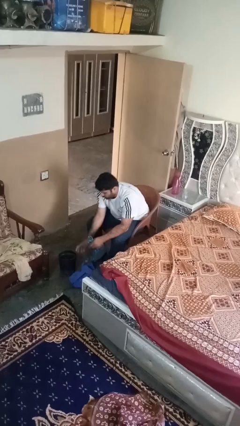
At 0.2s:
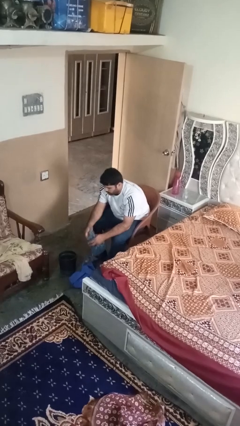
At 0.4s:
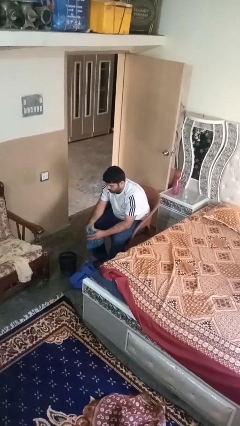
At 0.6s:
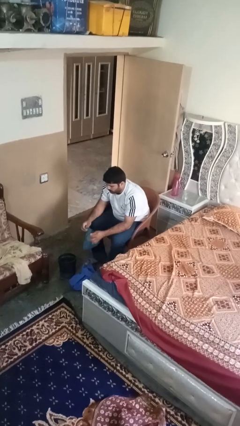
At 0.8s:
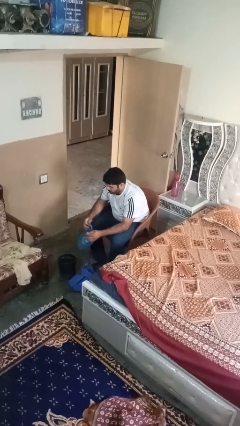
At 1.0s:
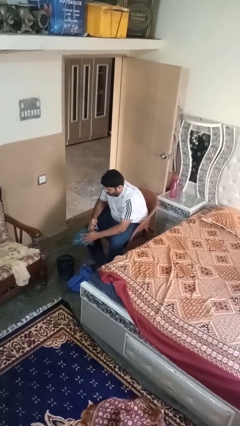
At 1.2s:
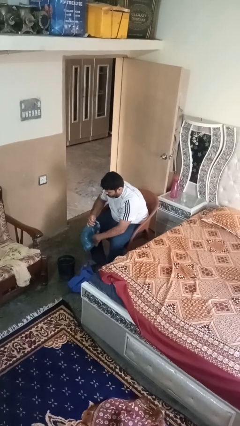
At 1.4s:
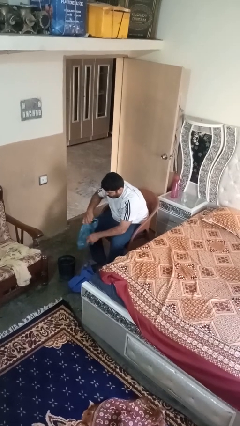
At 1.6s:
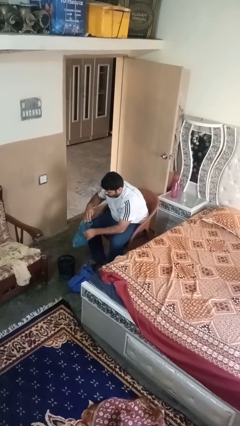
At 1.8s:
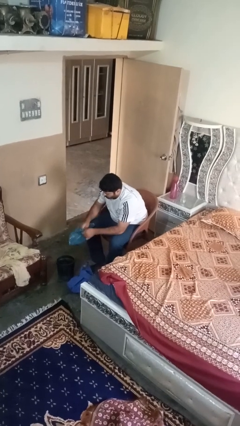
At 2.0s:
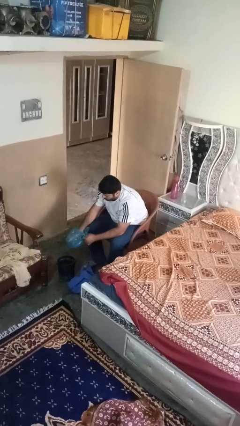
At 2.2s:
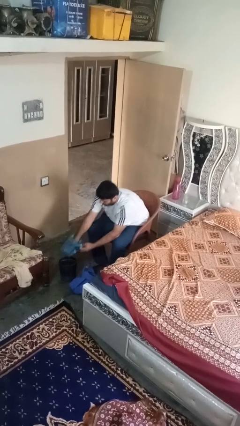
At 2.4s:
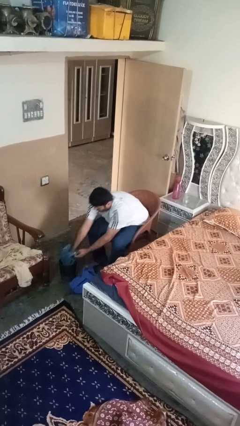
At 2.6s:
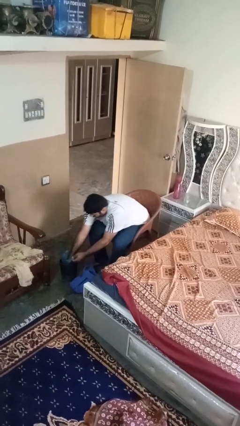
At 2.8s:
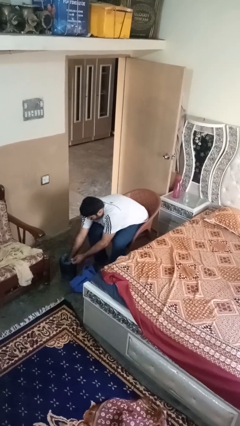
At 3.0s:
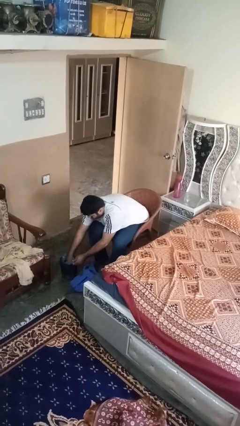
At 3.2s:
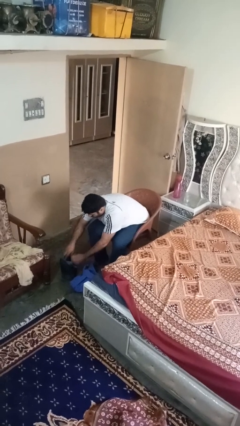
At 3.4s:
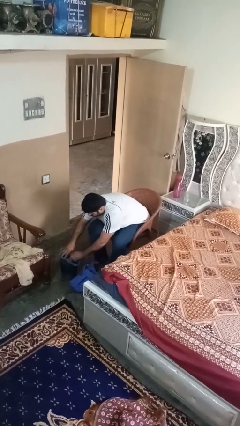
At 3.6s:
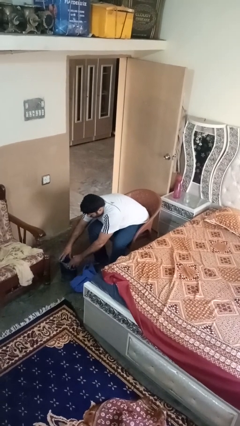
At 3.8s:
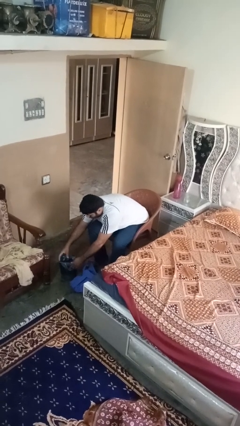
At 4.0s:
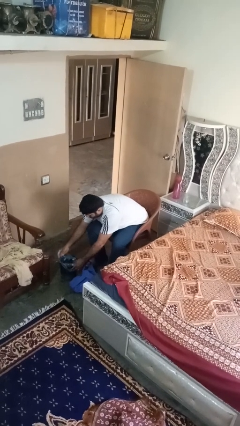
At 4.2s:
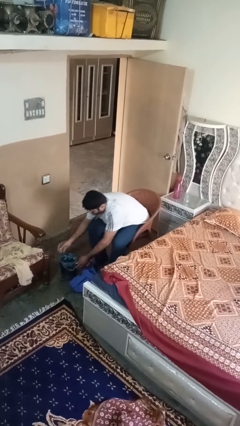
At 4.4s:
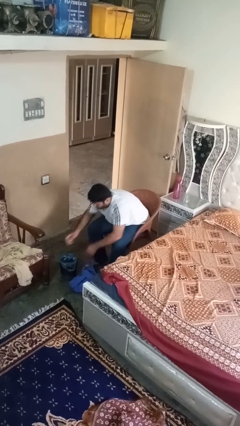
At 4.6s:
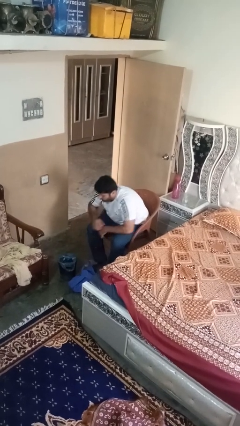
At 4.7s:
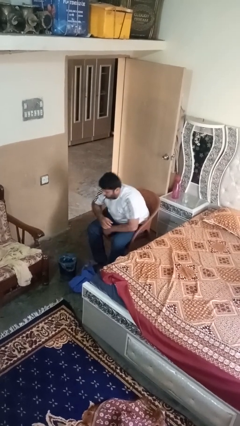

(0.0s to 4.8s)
person inserts trashbag into trashcan

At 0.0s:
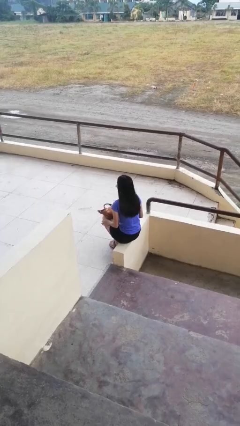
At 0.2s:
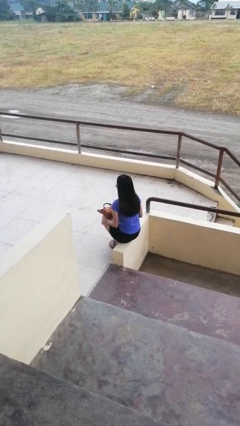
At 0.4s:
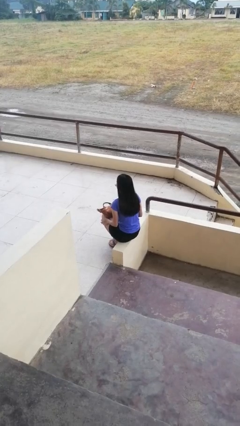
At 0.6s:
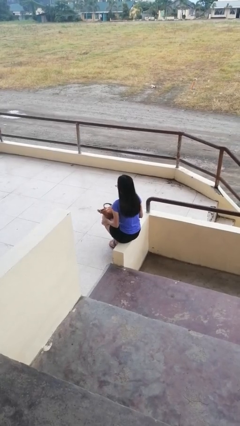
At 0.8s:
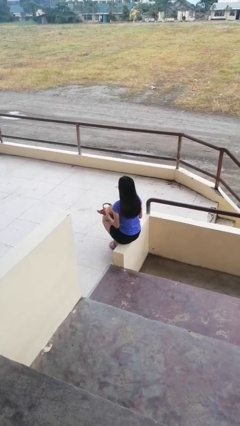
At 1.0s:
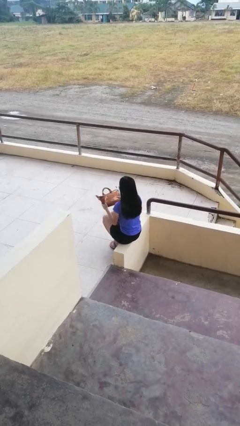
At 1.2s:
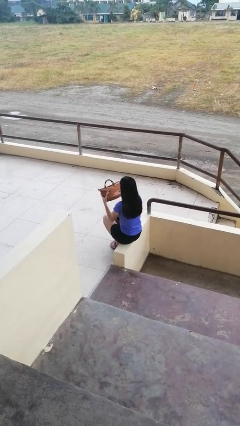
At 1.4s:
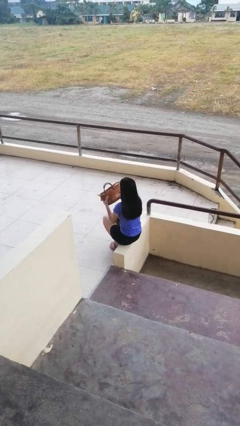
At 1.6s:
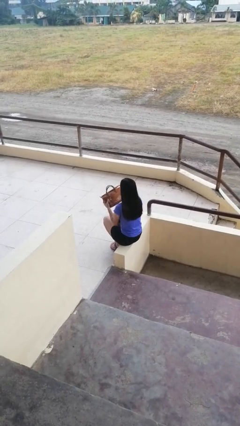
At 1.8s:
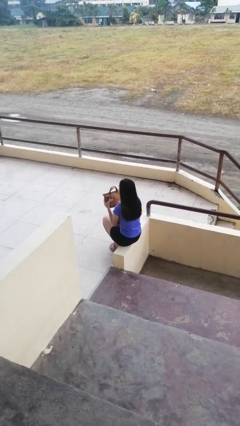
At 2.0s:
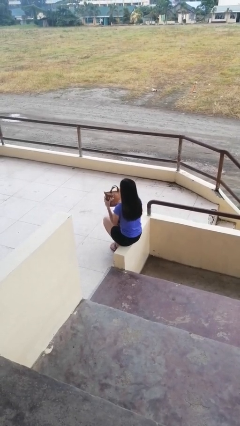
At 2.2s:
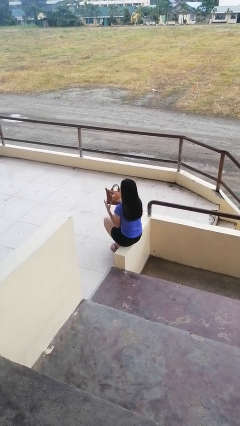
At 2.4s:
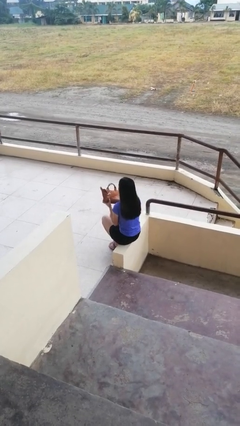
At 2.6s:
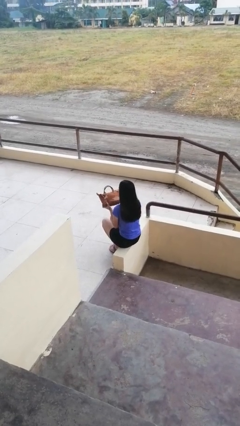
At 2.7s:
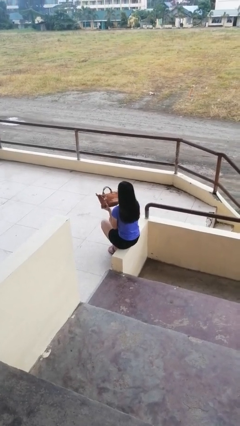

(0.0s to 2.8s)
person taps object with finger

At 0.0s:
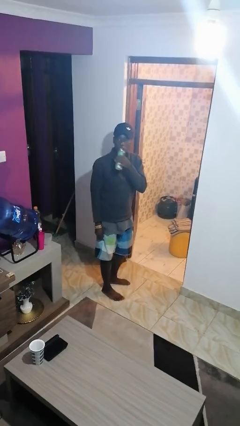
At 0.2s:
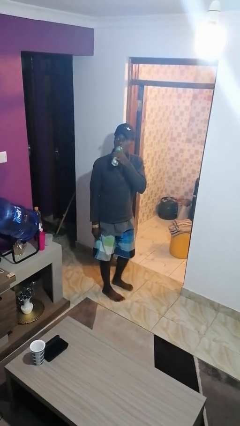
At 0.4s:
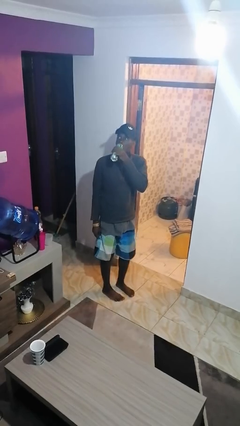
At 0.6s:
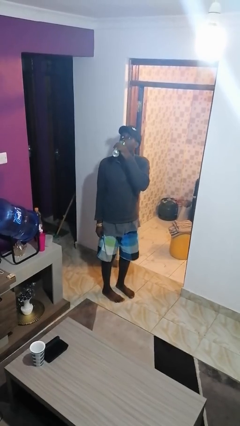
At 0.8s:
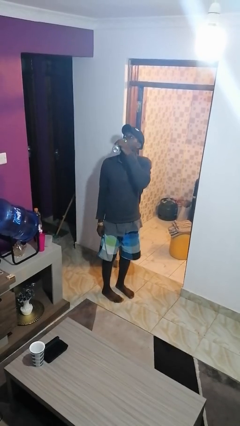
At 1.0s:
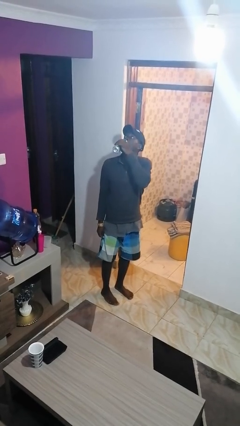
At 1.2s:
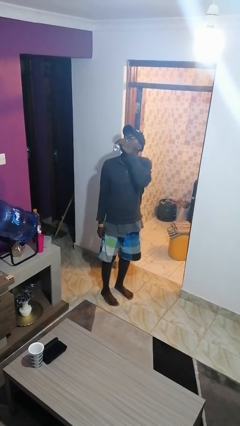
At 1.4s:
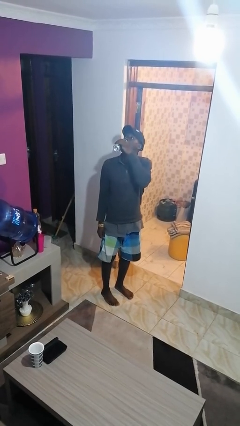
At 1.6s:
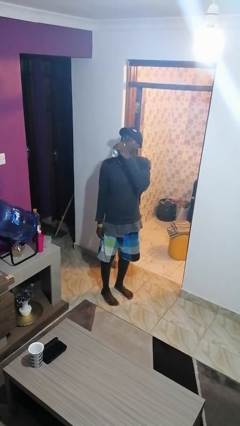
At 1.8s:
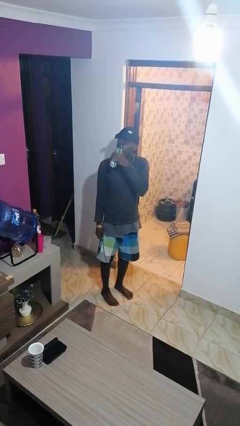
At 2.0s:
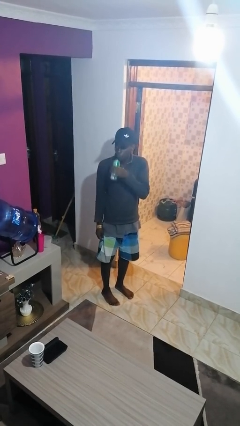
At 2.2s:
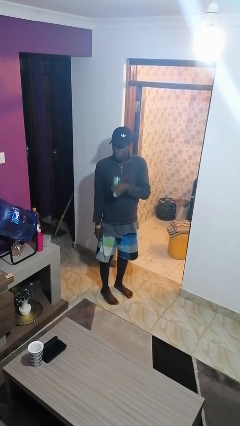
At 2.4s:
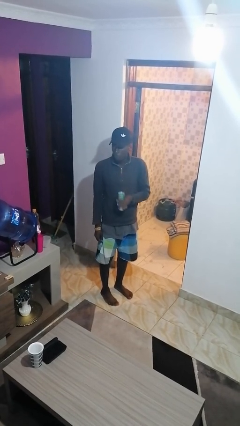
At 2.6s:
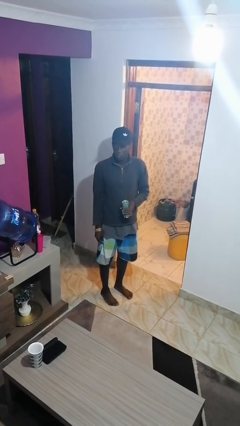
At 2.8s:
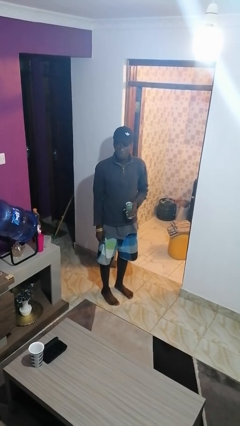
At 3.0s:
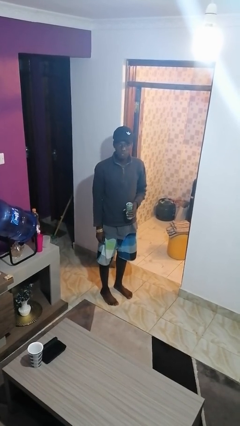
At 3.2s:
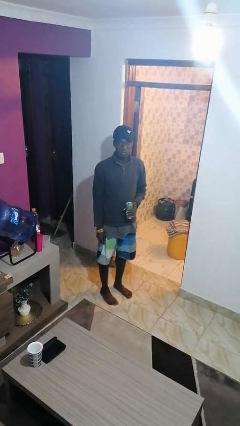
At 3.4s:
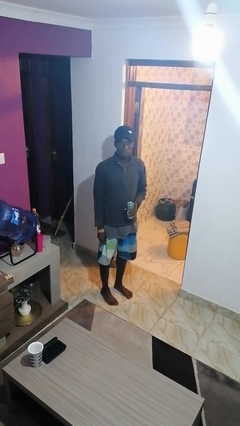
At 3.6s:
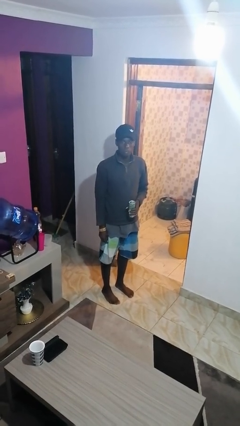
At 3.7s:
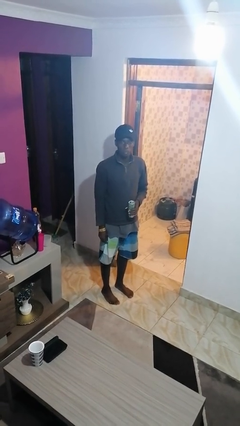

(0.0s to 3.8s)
person drinks from beverage can

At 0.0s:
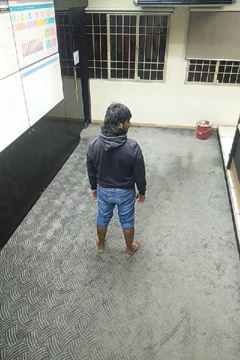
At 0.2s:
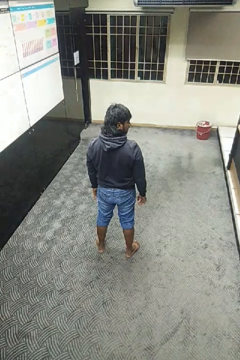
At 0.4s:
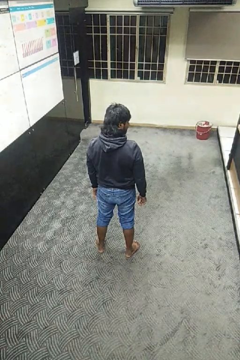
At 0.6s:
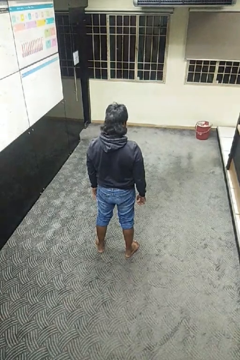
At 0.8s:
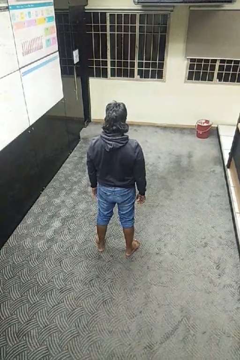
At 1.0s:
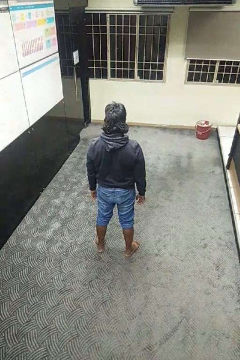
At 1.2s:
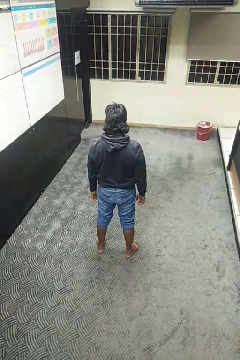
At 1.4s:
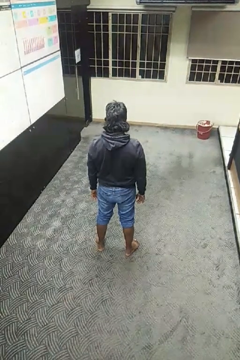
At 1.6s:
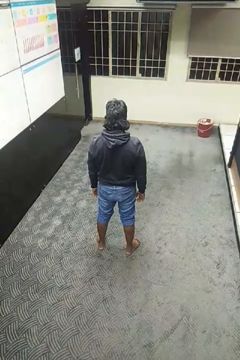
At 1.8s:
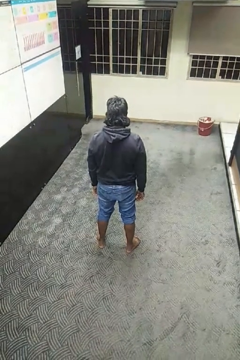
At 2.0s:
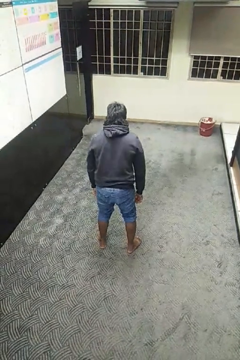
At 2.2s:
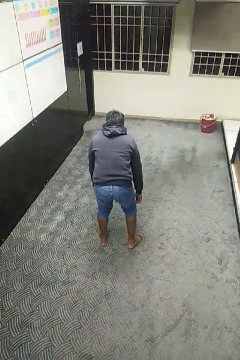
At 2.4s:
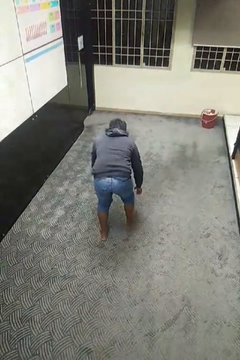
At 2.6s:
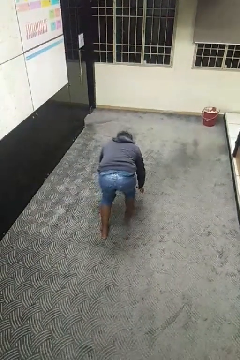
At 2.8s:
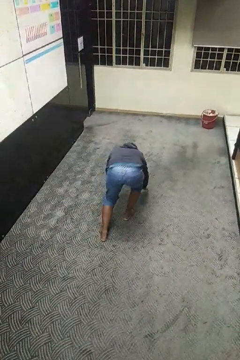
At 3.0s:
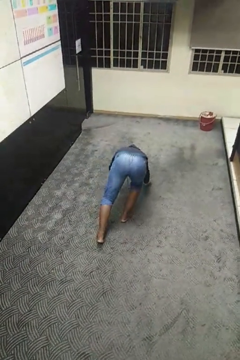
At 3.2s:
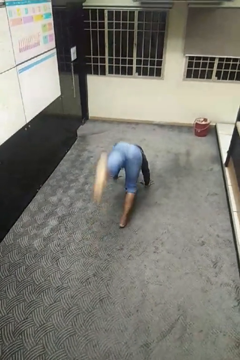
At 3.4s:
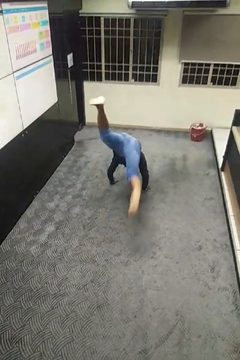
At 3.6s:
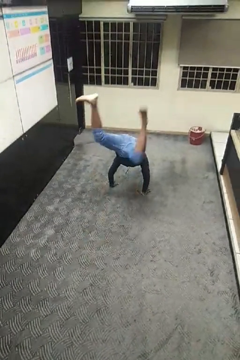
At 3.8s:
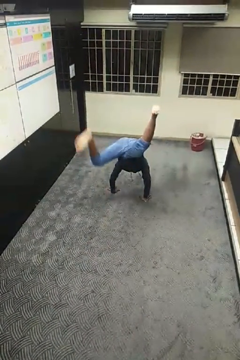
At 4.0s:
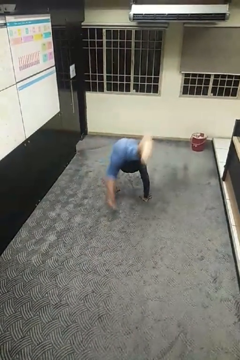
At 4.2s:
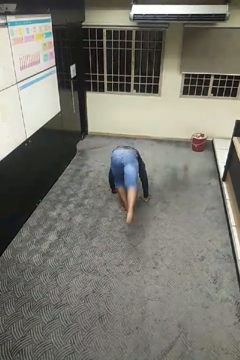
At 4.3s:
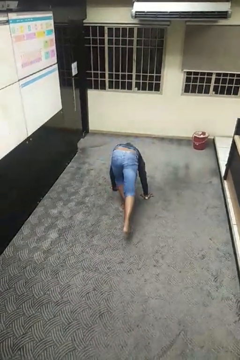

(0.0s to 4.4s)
person handstand

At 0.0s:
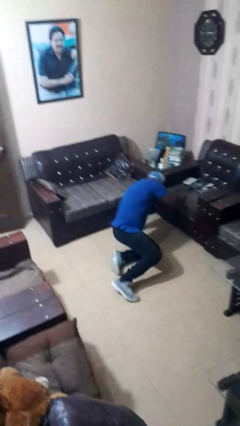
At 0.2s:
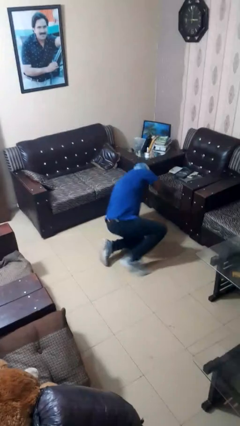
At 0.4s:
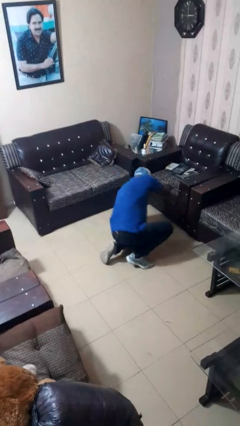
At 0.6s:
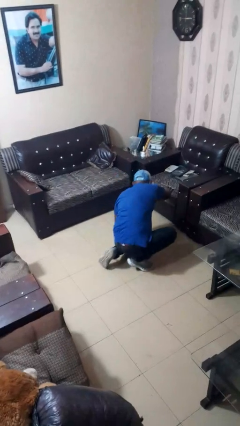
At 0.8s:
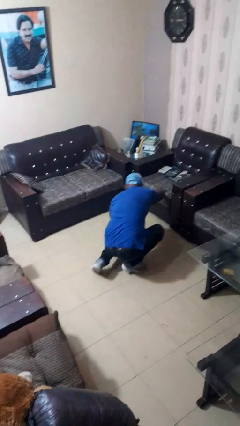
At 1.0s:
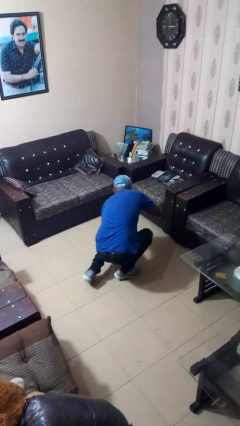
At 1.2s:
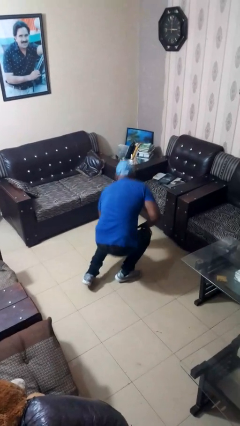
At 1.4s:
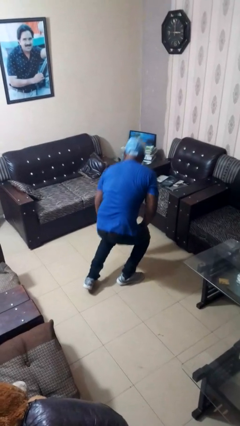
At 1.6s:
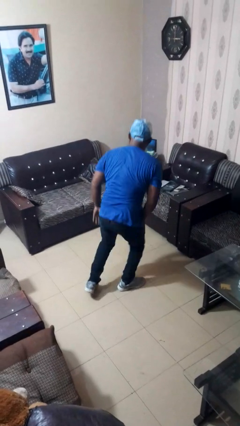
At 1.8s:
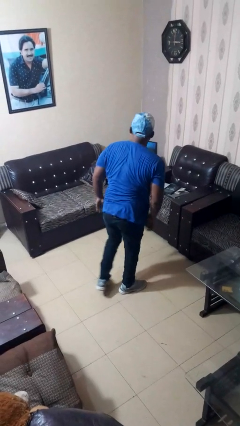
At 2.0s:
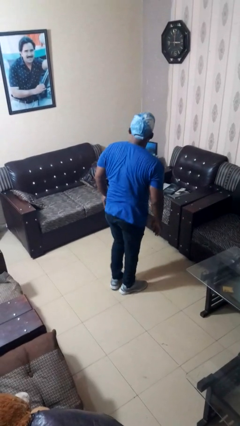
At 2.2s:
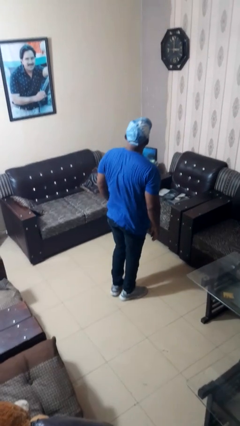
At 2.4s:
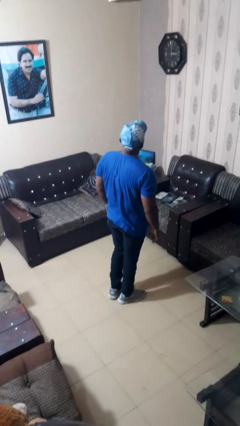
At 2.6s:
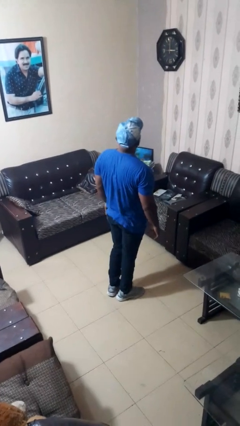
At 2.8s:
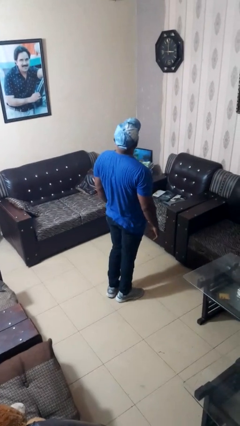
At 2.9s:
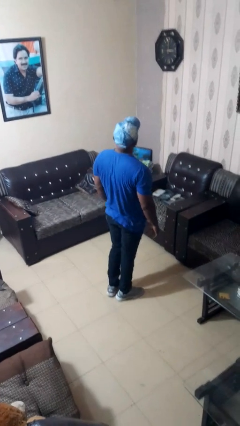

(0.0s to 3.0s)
person stands up from floor
